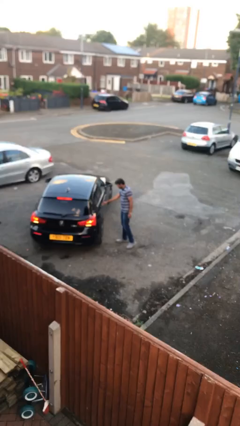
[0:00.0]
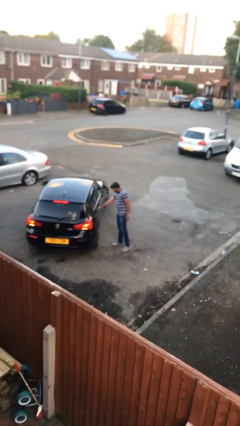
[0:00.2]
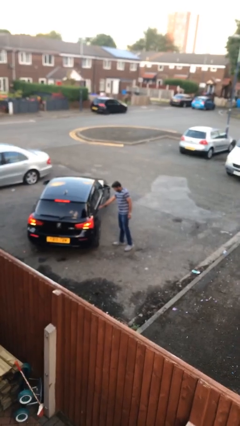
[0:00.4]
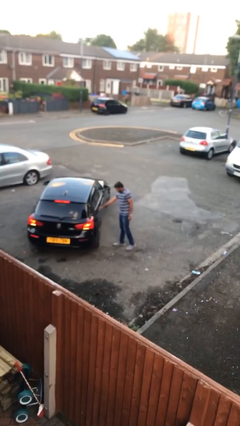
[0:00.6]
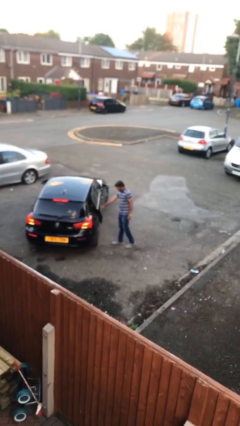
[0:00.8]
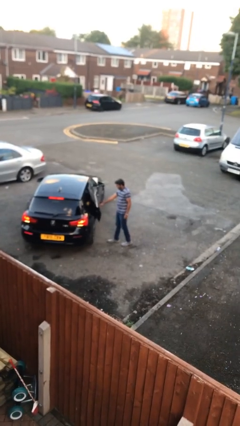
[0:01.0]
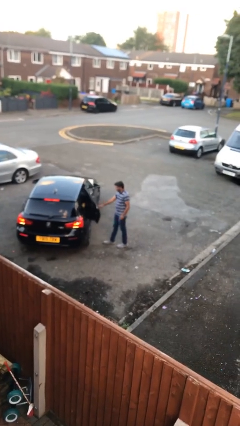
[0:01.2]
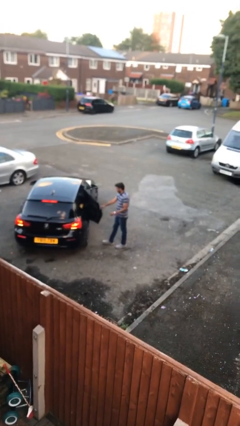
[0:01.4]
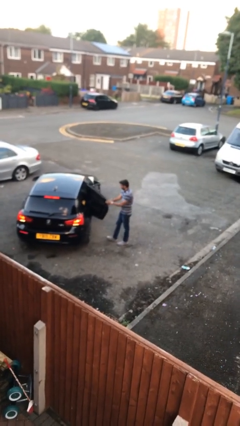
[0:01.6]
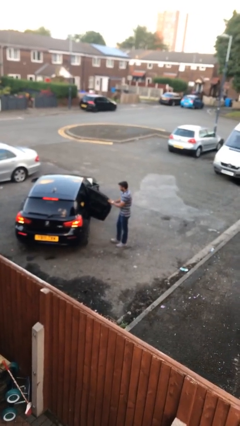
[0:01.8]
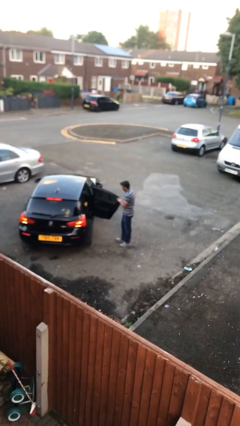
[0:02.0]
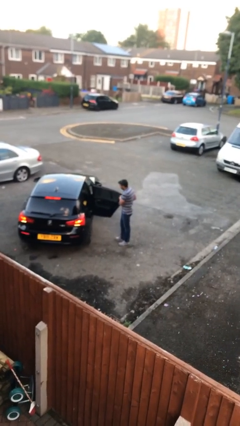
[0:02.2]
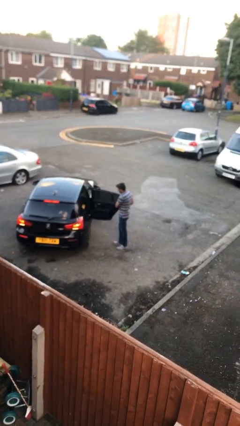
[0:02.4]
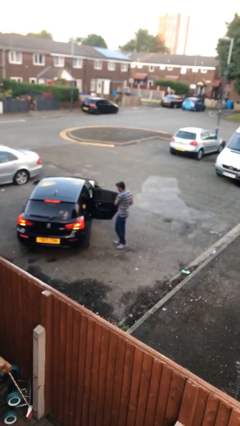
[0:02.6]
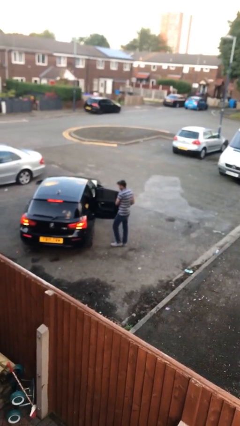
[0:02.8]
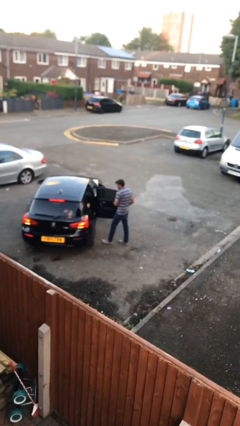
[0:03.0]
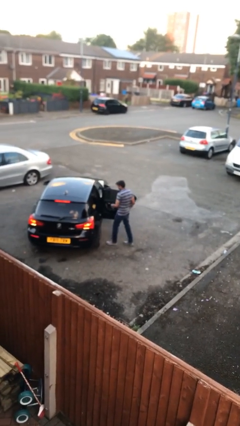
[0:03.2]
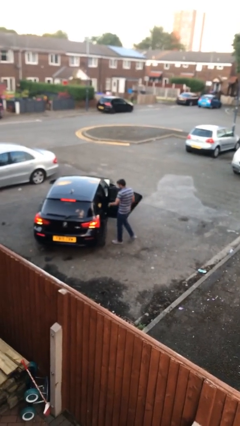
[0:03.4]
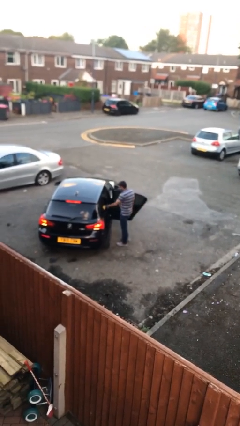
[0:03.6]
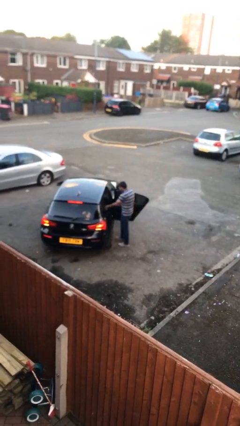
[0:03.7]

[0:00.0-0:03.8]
person opens car door

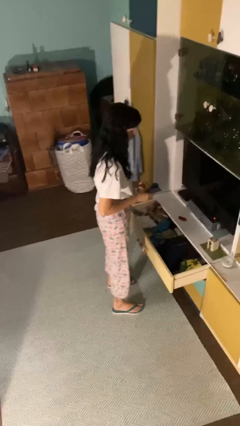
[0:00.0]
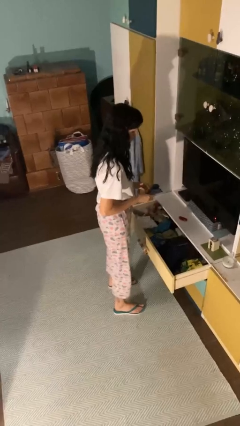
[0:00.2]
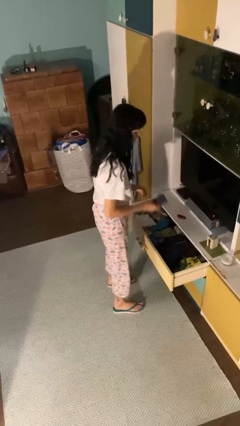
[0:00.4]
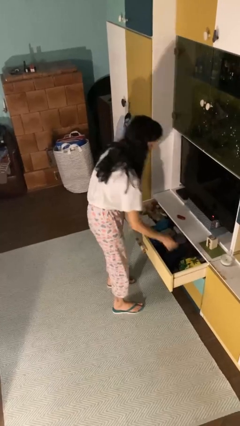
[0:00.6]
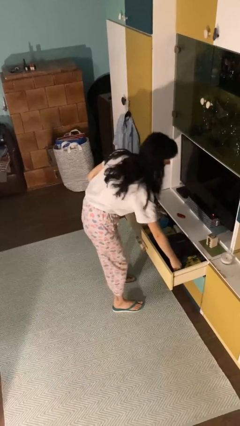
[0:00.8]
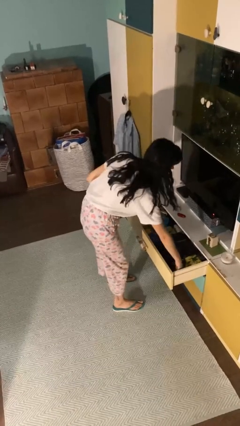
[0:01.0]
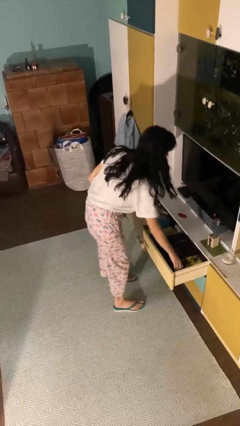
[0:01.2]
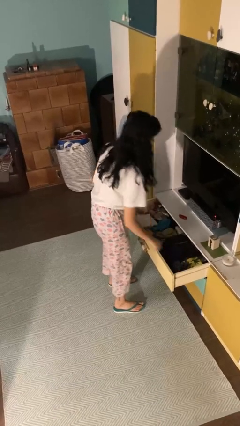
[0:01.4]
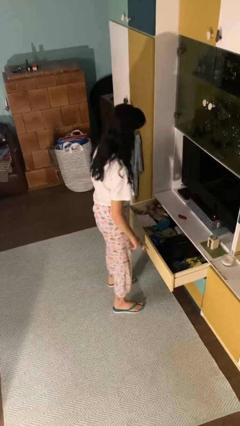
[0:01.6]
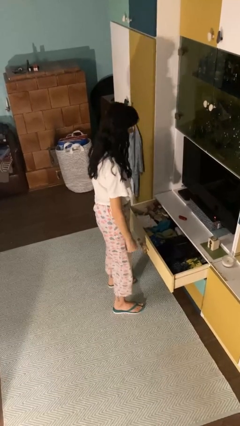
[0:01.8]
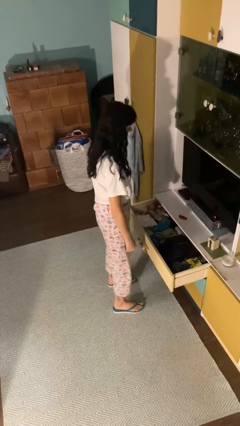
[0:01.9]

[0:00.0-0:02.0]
person puts clothes into dresser

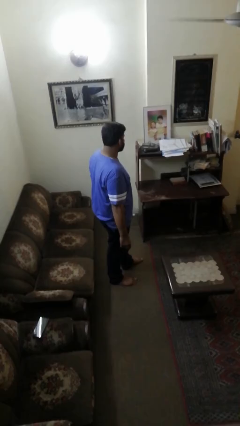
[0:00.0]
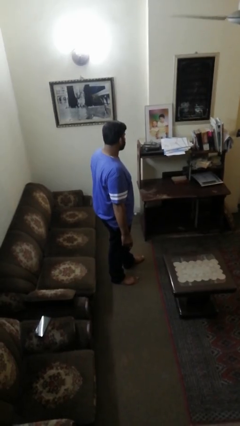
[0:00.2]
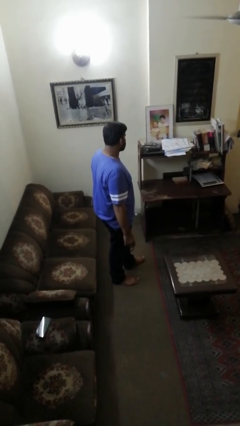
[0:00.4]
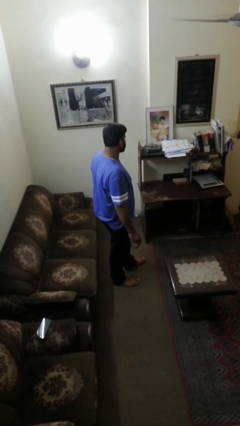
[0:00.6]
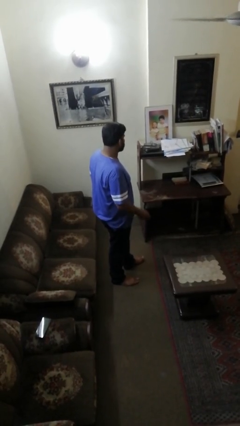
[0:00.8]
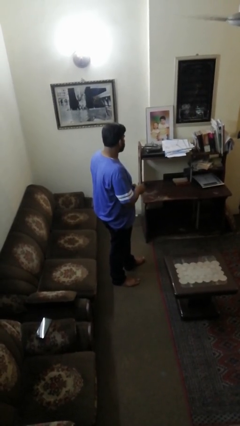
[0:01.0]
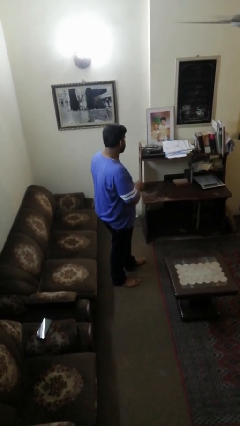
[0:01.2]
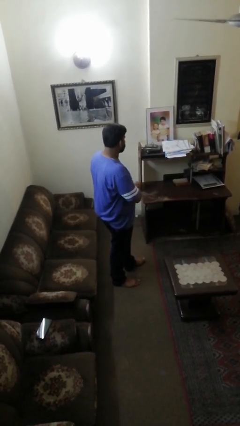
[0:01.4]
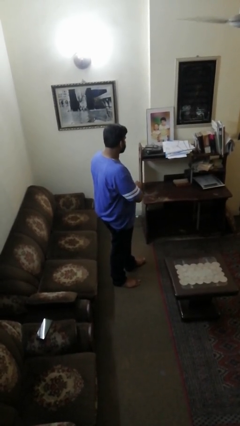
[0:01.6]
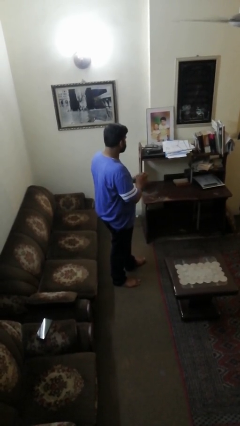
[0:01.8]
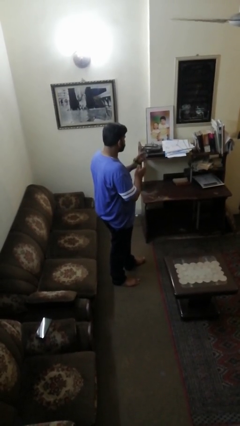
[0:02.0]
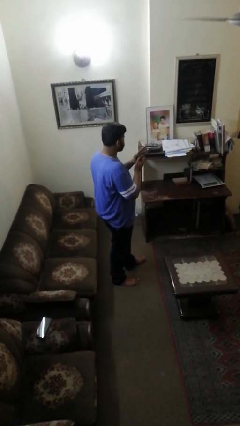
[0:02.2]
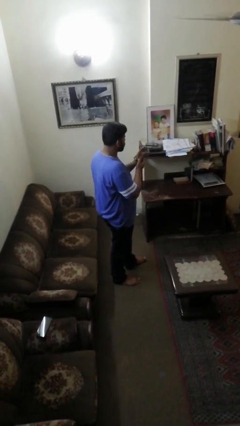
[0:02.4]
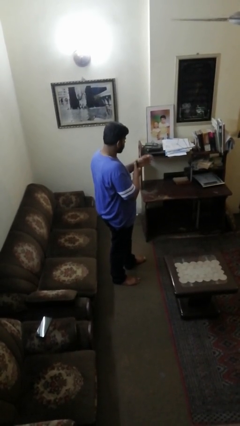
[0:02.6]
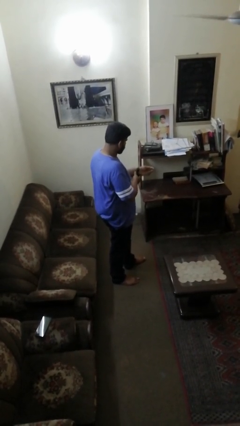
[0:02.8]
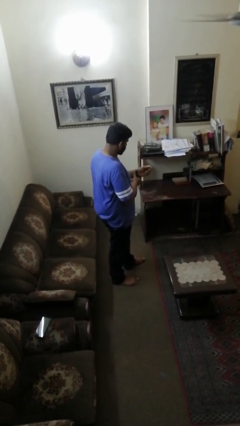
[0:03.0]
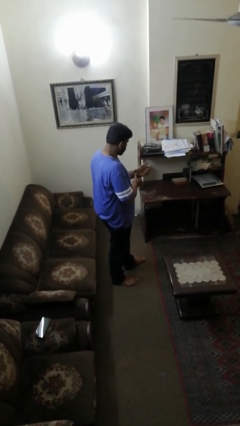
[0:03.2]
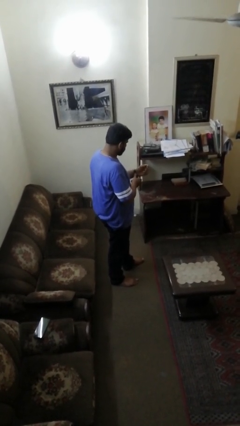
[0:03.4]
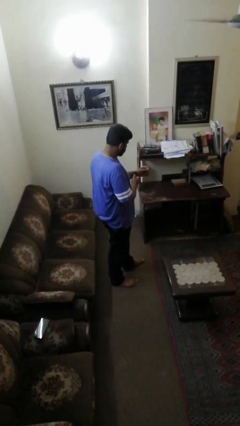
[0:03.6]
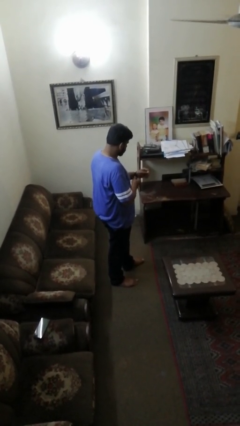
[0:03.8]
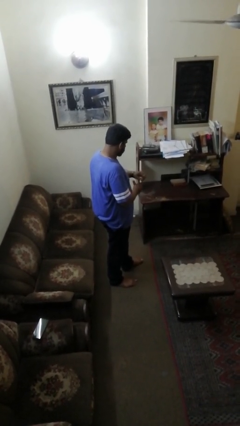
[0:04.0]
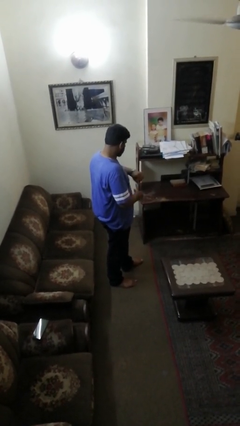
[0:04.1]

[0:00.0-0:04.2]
person puts on wristwatch

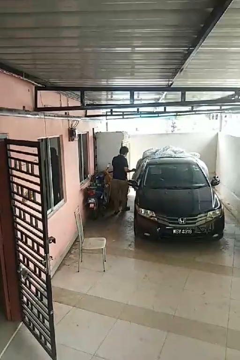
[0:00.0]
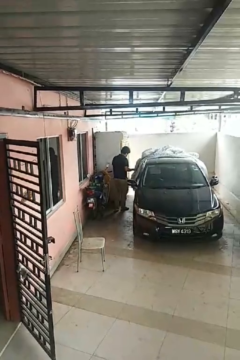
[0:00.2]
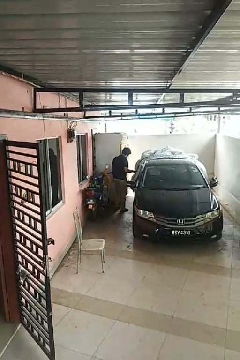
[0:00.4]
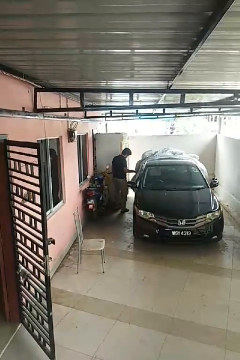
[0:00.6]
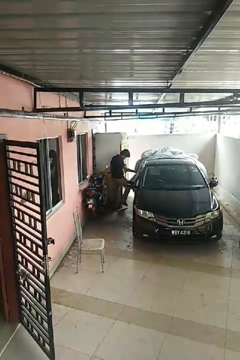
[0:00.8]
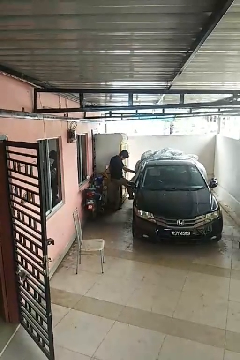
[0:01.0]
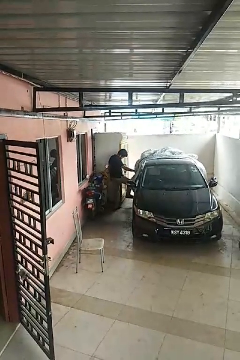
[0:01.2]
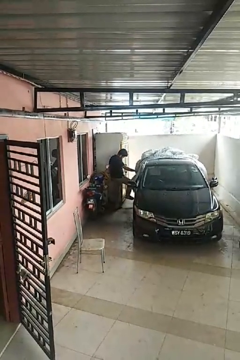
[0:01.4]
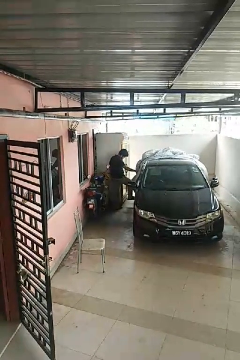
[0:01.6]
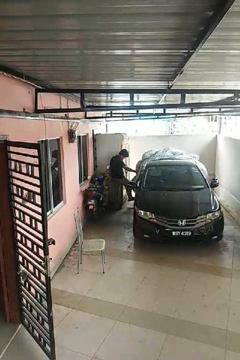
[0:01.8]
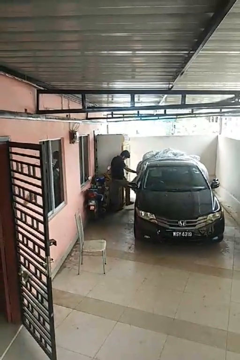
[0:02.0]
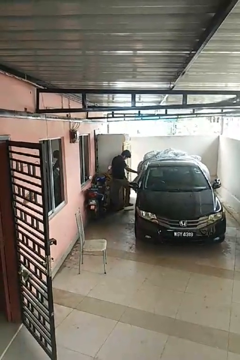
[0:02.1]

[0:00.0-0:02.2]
person kicks car tires

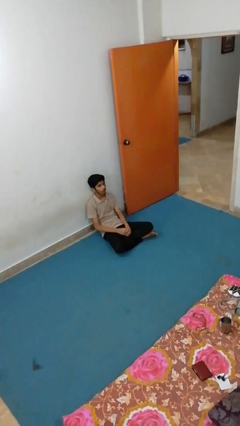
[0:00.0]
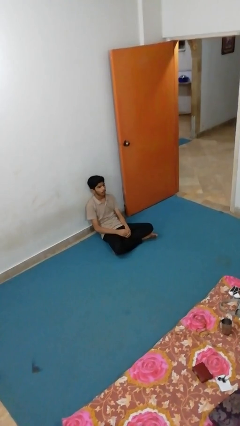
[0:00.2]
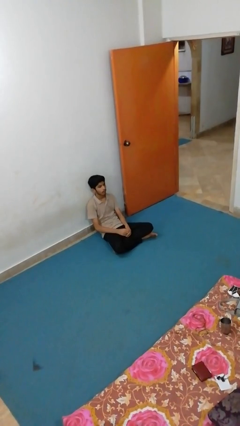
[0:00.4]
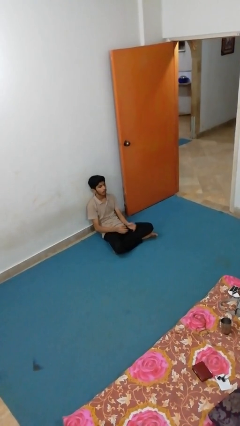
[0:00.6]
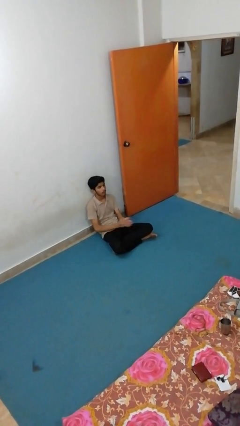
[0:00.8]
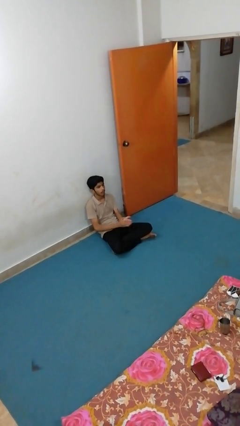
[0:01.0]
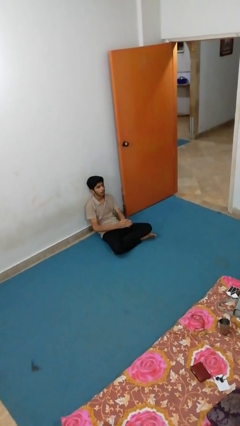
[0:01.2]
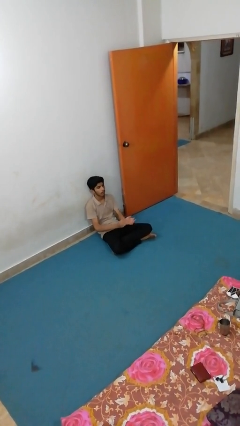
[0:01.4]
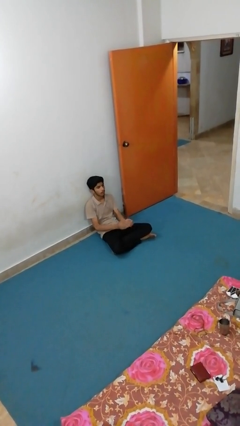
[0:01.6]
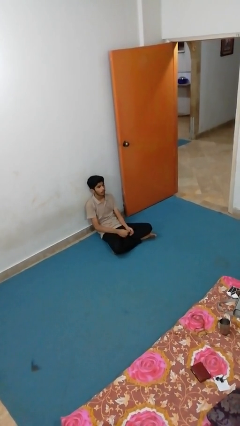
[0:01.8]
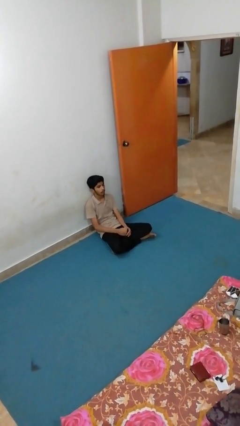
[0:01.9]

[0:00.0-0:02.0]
person claps hands

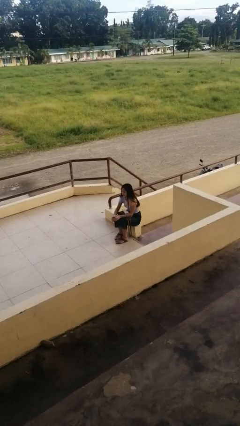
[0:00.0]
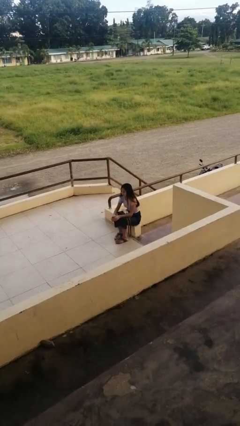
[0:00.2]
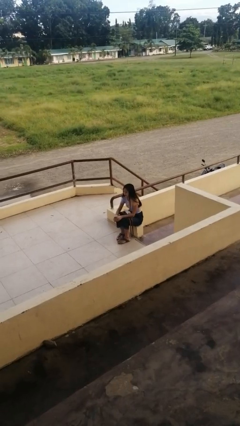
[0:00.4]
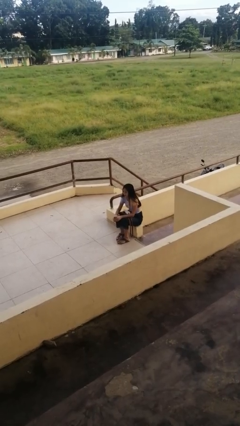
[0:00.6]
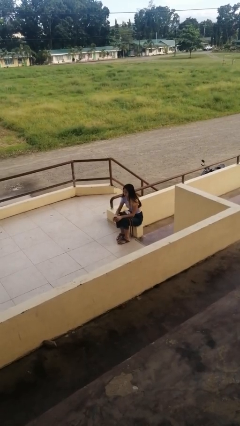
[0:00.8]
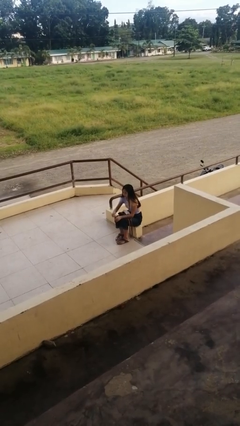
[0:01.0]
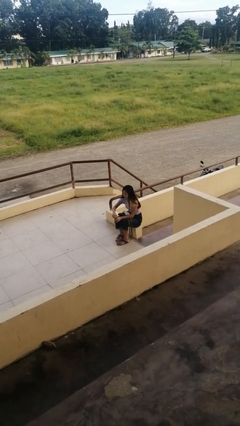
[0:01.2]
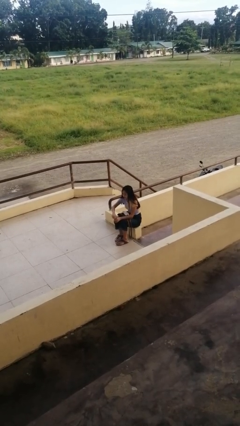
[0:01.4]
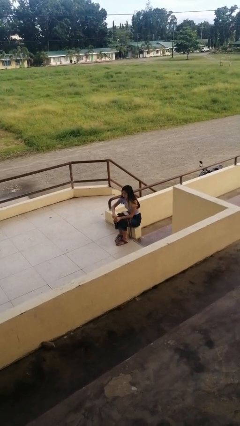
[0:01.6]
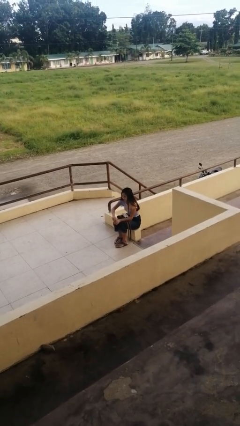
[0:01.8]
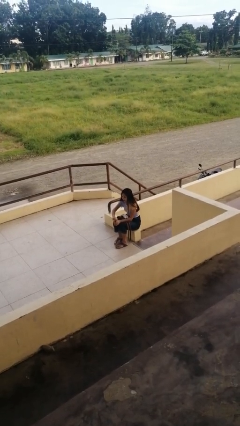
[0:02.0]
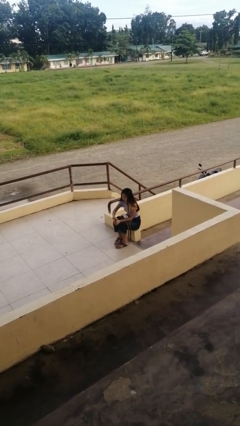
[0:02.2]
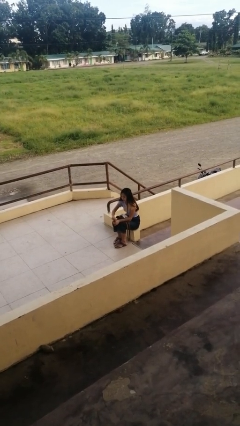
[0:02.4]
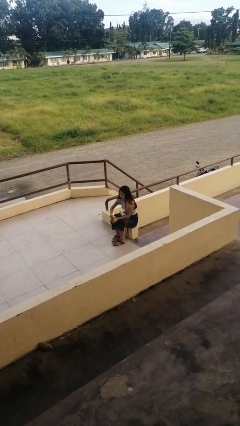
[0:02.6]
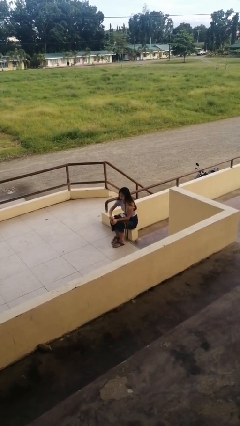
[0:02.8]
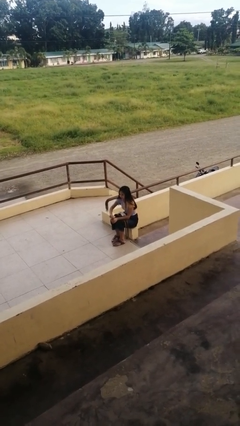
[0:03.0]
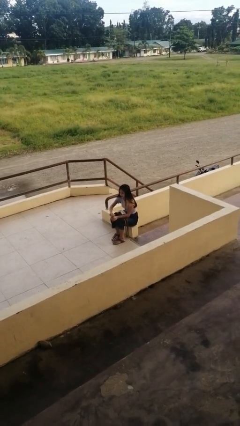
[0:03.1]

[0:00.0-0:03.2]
person opens beverage can
